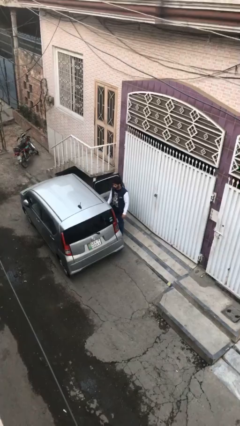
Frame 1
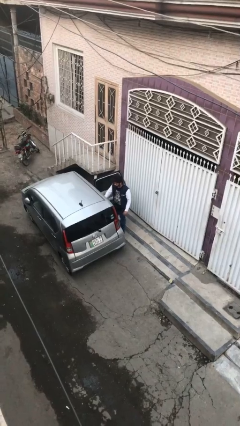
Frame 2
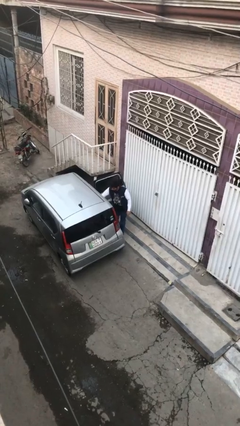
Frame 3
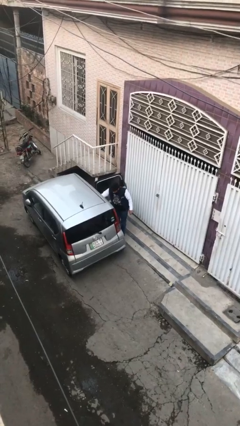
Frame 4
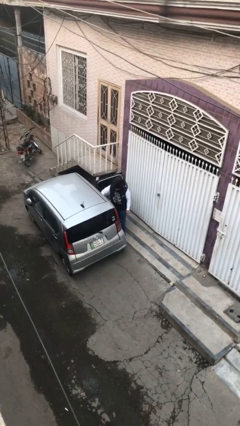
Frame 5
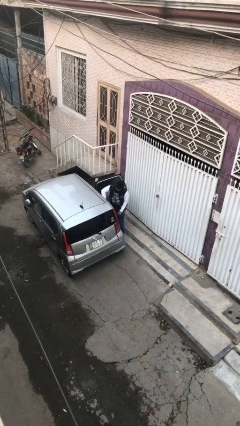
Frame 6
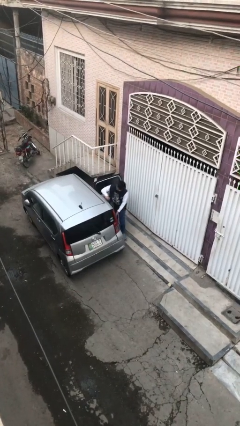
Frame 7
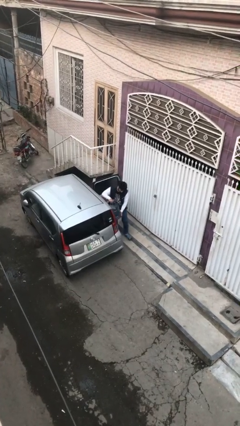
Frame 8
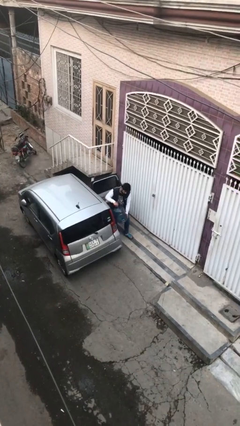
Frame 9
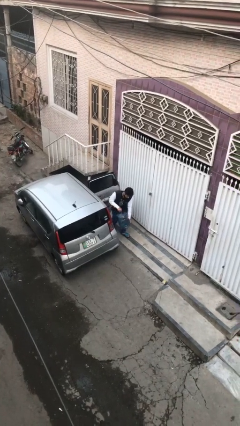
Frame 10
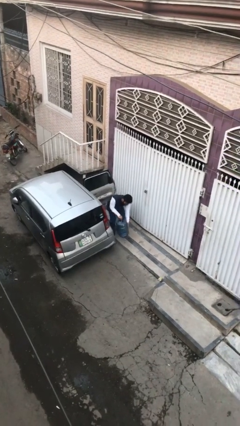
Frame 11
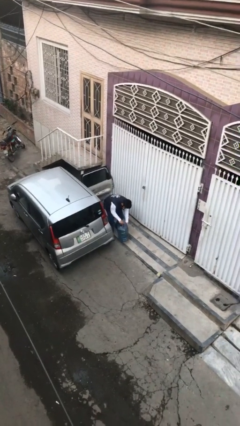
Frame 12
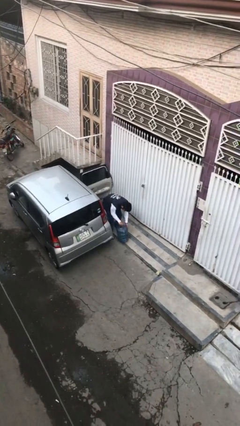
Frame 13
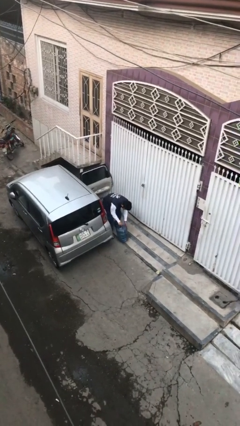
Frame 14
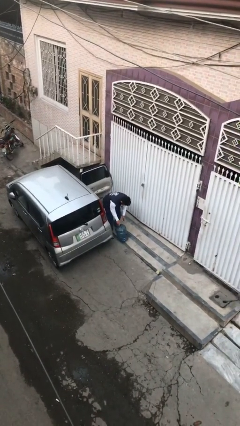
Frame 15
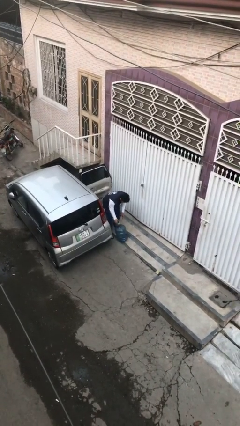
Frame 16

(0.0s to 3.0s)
person unloads car

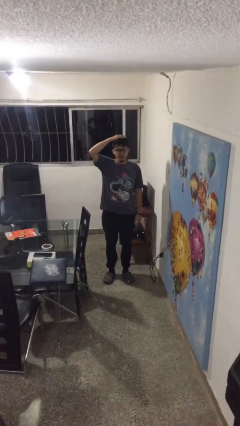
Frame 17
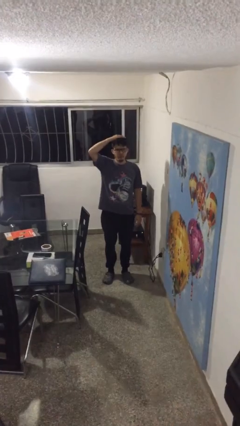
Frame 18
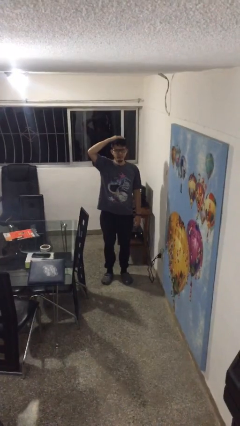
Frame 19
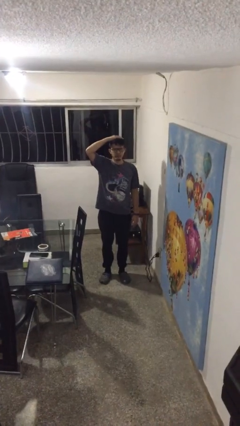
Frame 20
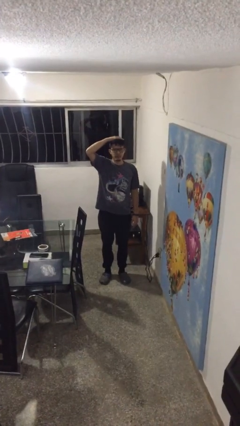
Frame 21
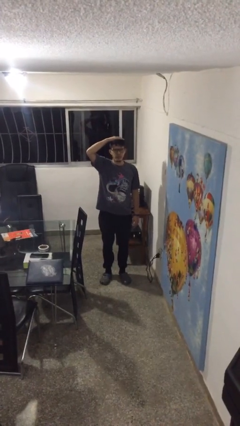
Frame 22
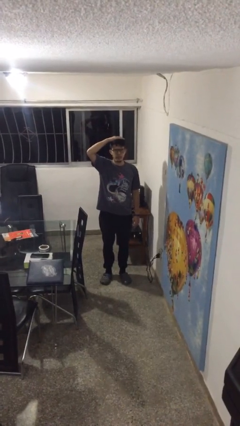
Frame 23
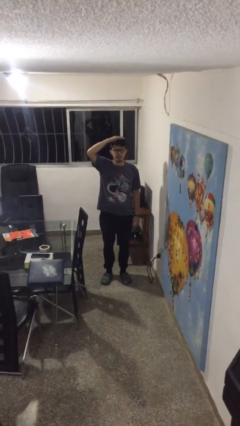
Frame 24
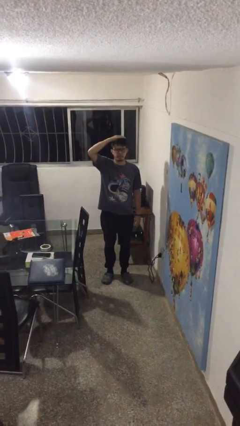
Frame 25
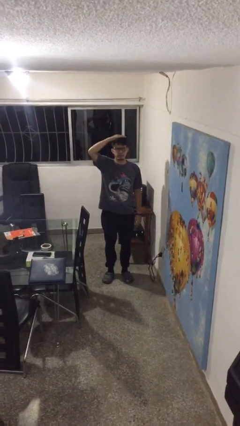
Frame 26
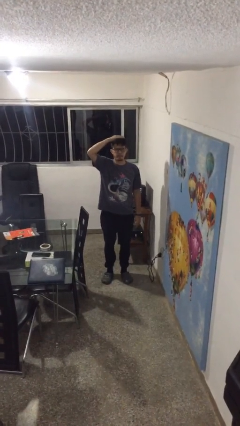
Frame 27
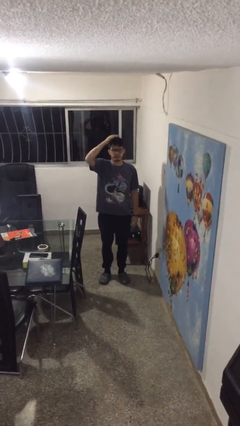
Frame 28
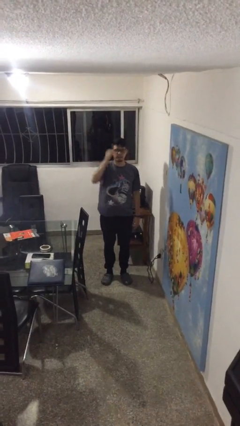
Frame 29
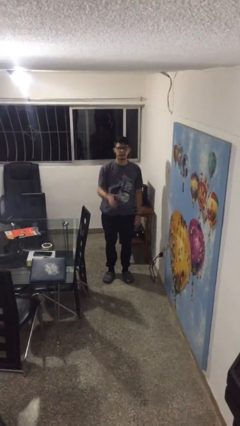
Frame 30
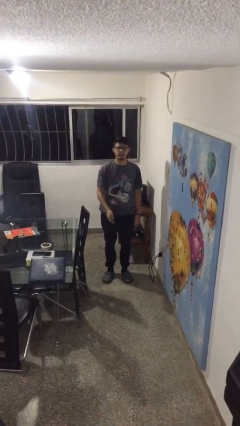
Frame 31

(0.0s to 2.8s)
person pats head

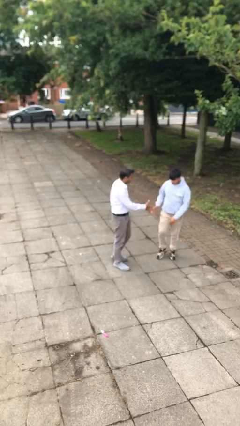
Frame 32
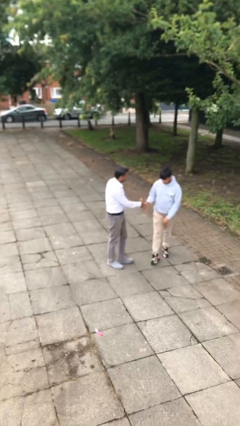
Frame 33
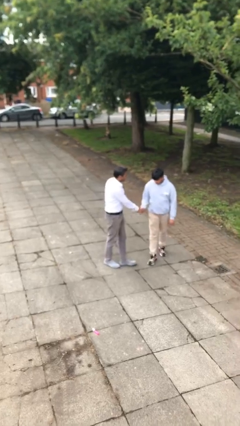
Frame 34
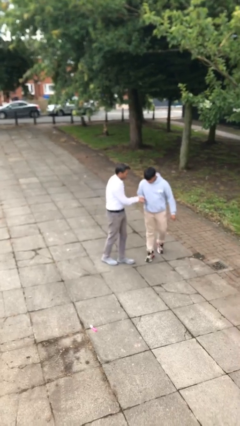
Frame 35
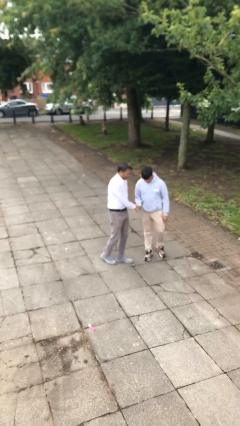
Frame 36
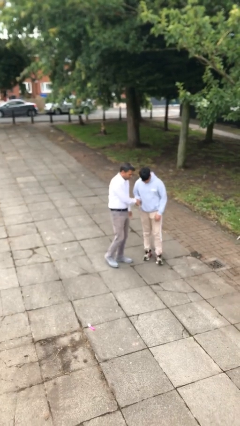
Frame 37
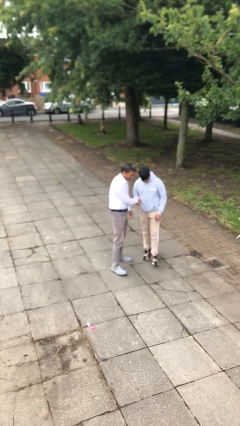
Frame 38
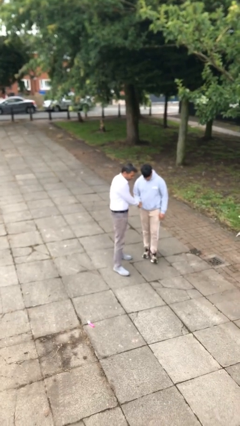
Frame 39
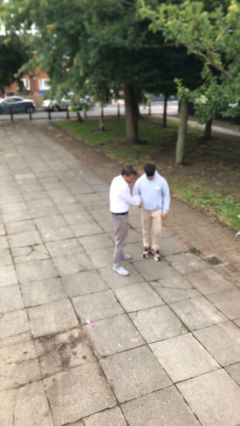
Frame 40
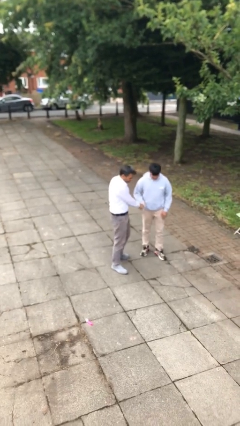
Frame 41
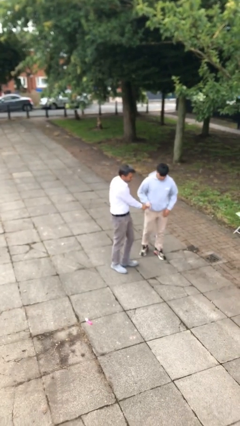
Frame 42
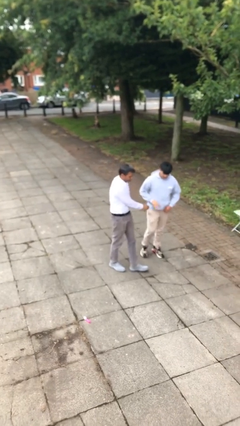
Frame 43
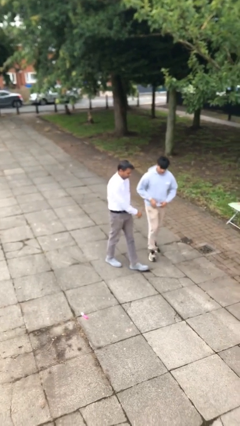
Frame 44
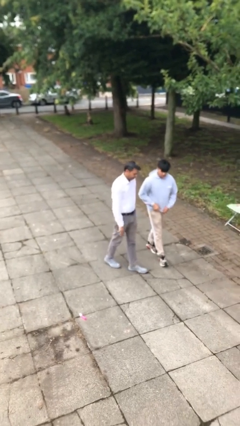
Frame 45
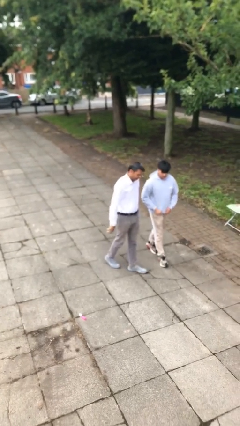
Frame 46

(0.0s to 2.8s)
person shakes hand

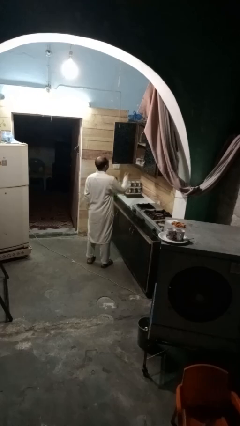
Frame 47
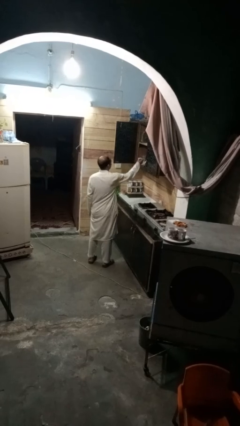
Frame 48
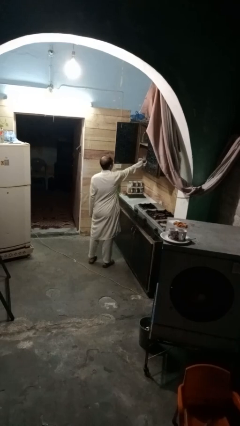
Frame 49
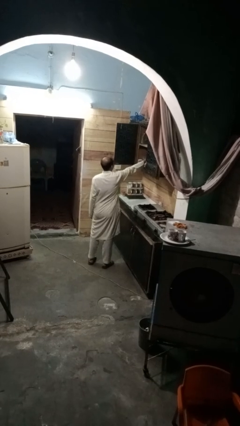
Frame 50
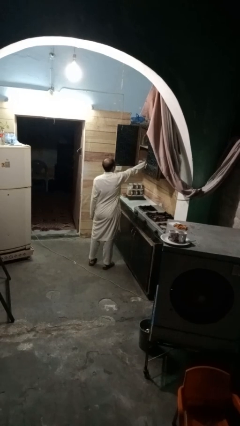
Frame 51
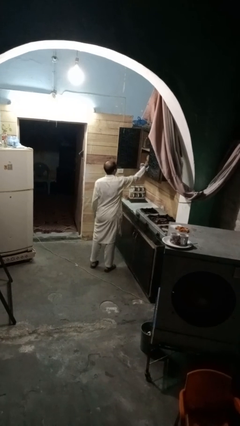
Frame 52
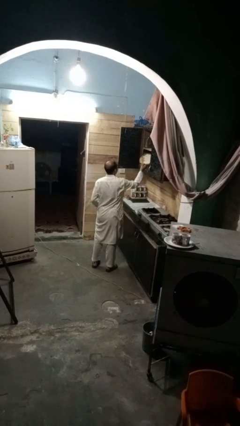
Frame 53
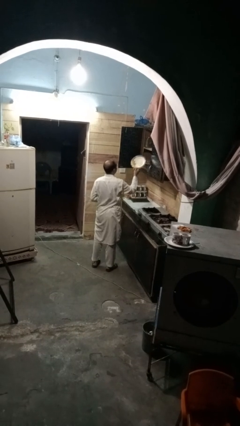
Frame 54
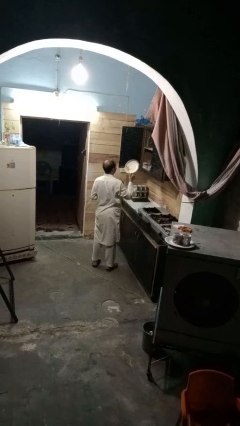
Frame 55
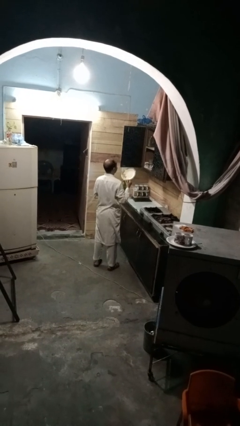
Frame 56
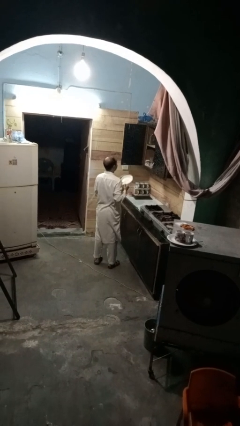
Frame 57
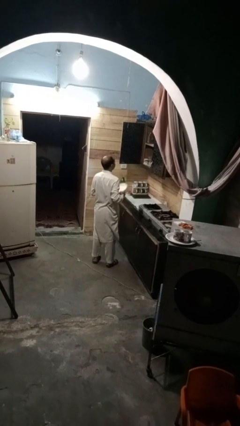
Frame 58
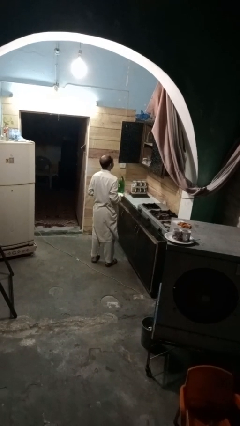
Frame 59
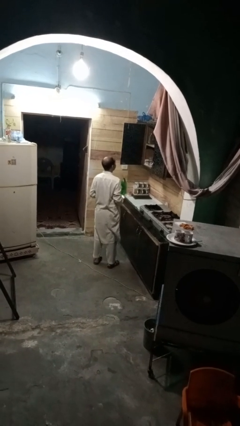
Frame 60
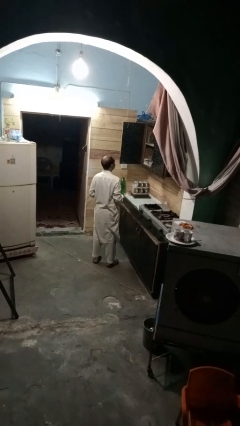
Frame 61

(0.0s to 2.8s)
person takes object from cabinet

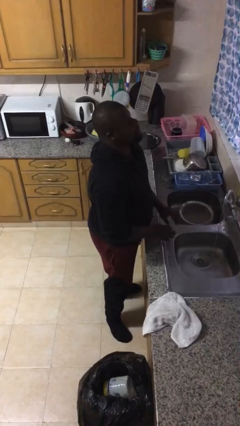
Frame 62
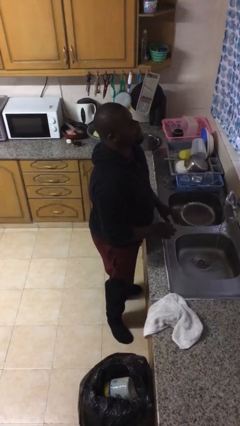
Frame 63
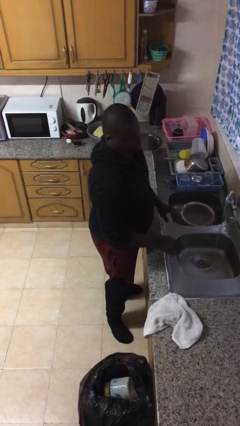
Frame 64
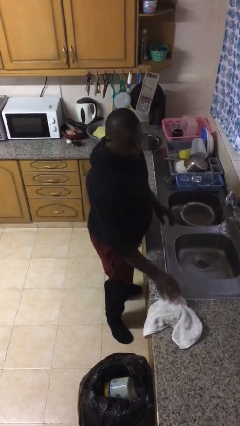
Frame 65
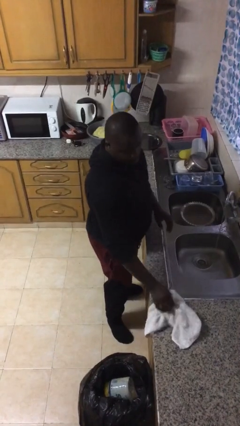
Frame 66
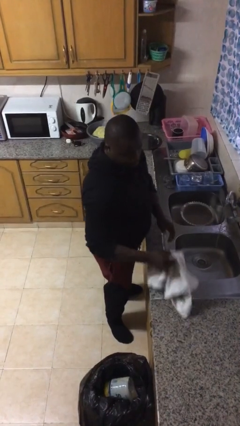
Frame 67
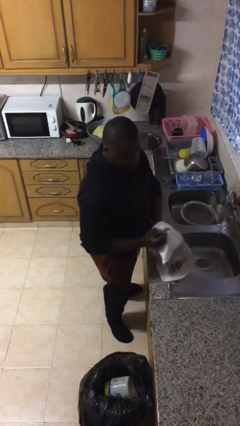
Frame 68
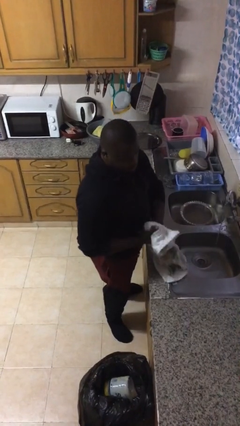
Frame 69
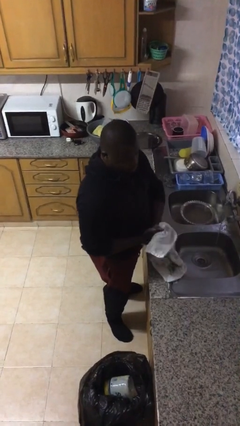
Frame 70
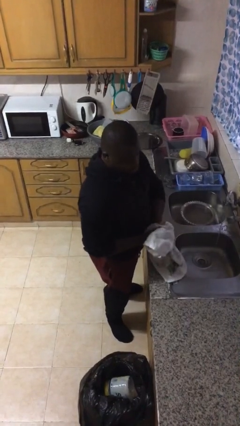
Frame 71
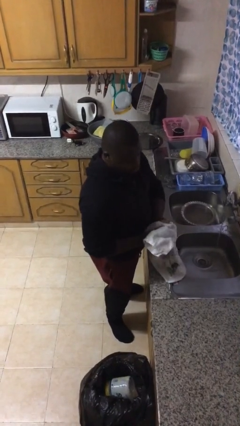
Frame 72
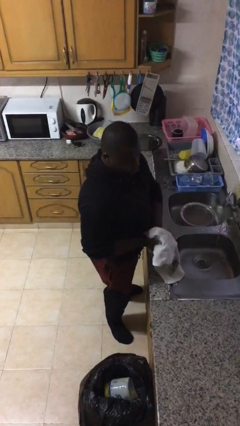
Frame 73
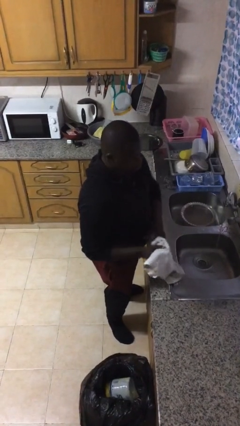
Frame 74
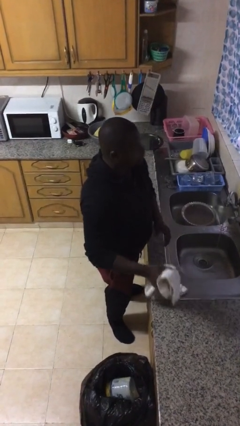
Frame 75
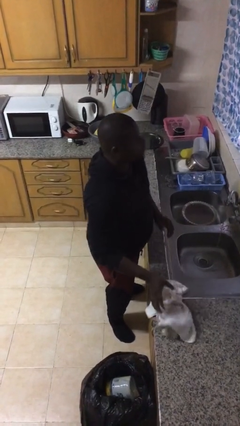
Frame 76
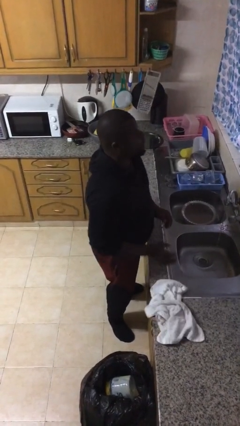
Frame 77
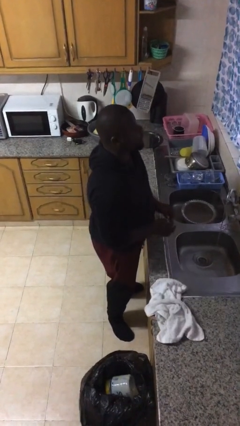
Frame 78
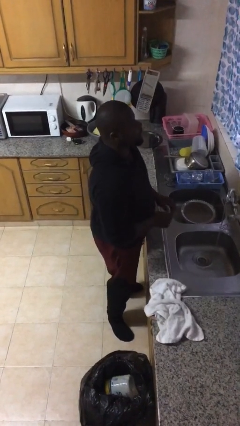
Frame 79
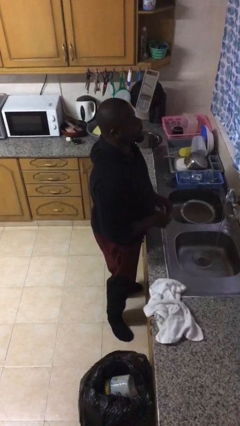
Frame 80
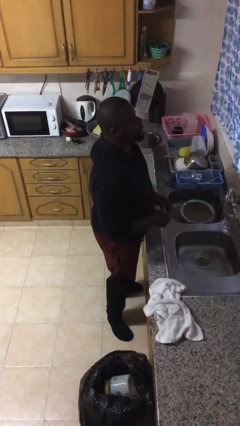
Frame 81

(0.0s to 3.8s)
person dries hands with towel

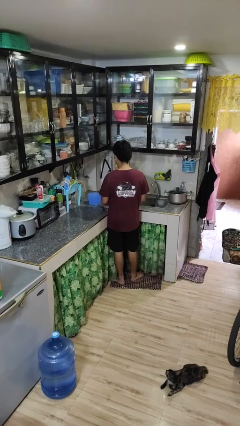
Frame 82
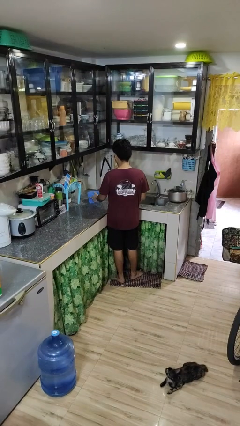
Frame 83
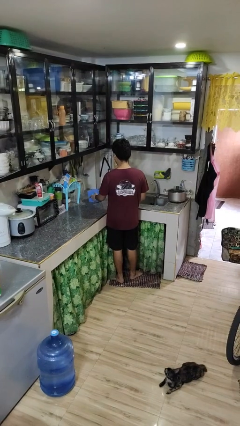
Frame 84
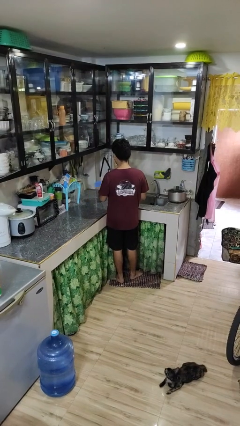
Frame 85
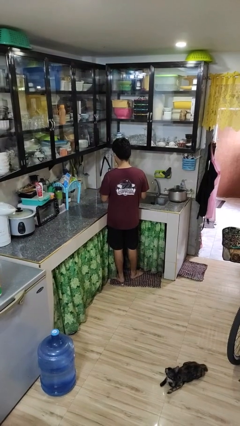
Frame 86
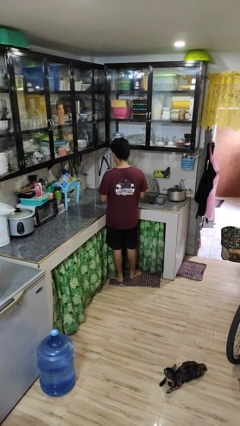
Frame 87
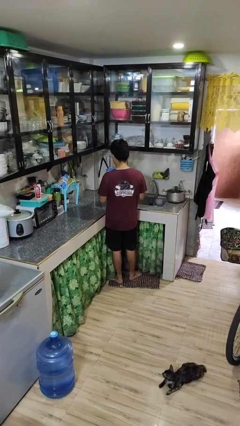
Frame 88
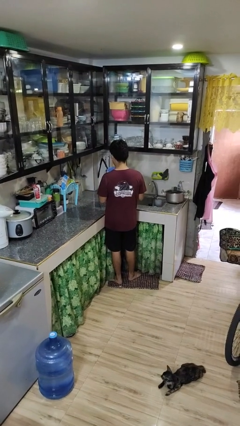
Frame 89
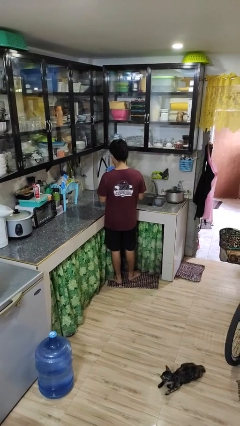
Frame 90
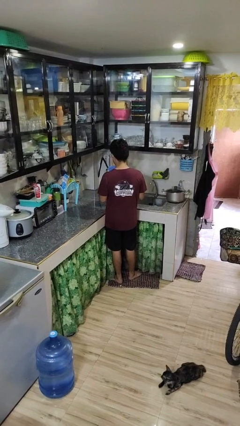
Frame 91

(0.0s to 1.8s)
person picks up object from countertop

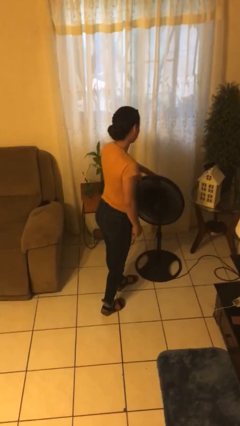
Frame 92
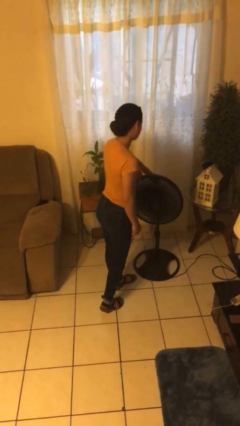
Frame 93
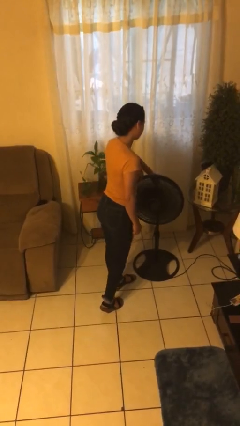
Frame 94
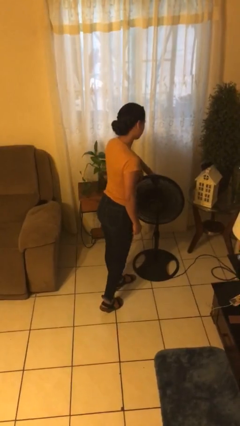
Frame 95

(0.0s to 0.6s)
person turns off fan
